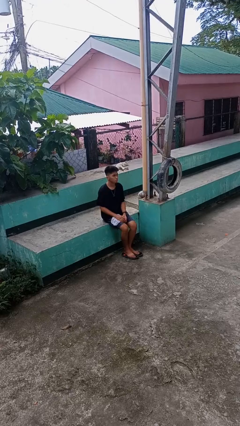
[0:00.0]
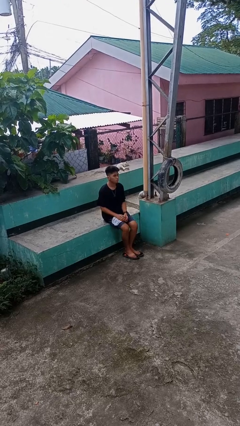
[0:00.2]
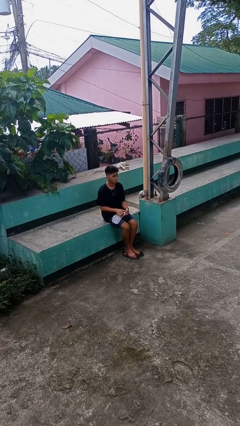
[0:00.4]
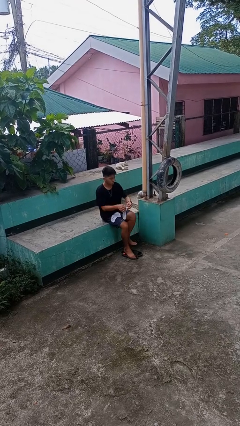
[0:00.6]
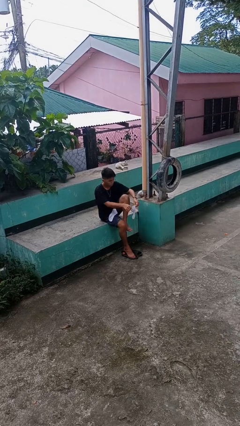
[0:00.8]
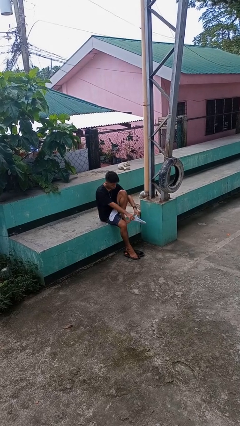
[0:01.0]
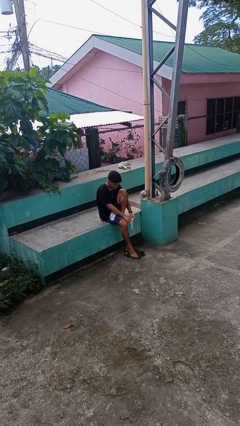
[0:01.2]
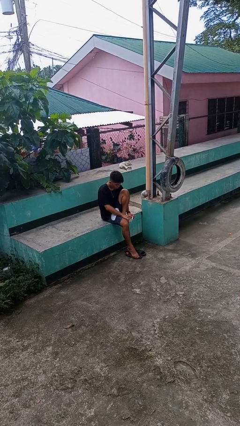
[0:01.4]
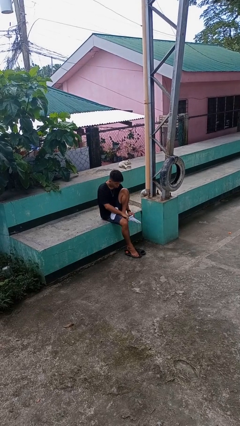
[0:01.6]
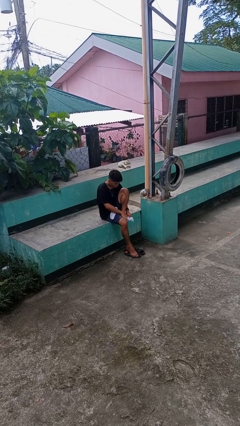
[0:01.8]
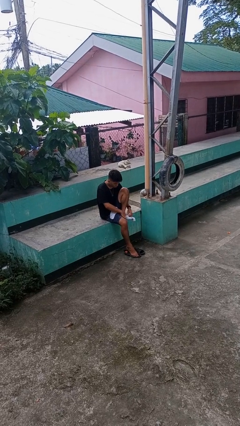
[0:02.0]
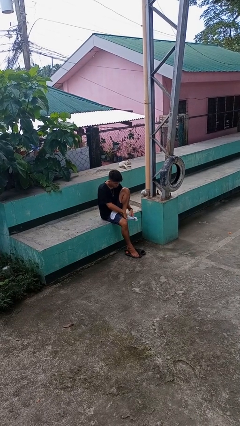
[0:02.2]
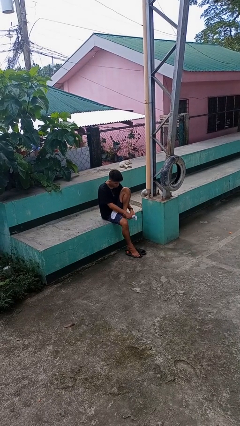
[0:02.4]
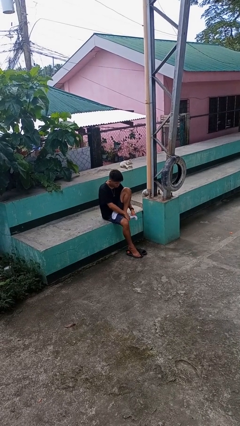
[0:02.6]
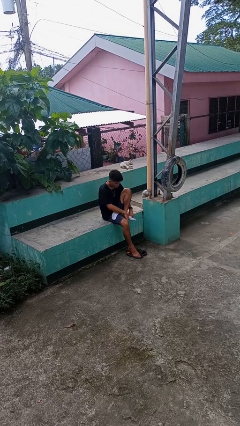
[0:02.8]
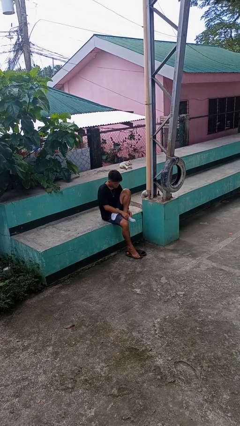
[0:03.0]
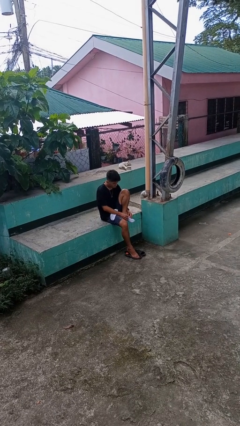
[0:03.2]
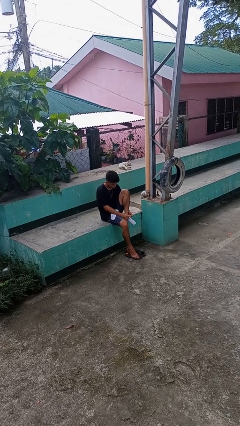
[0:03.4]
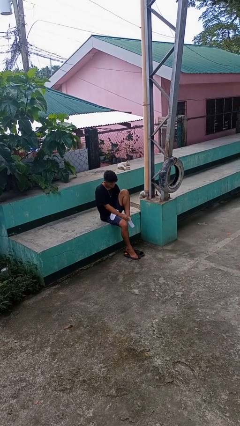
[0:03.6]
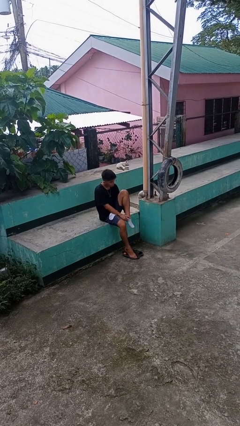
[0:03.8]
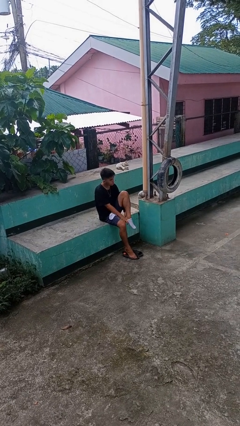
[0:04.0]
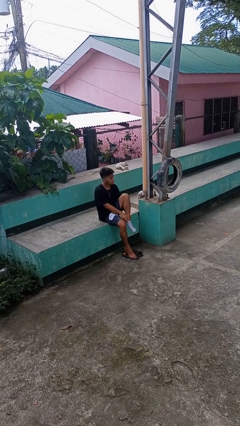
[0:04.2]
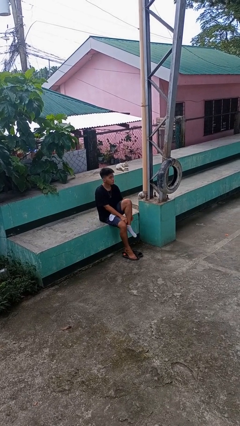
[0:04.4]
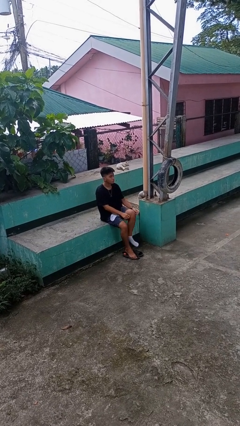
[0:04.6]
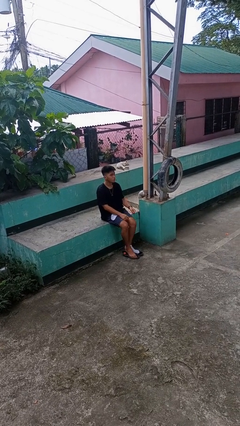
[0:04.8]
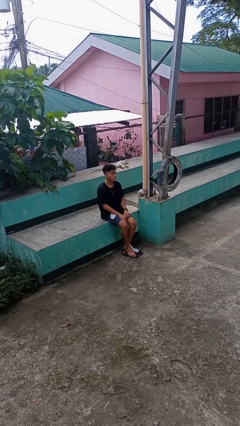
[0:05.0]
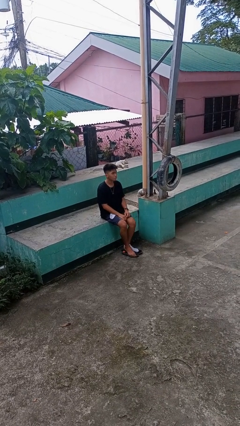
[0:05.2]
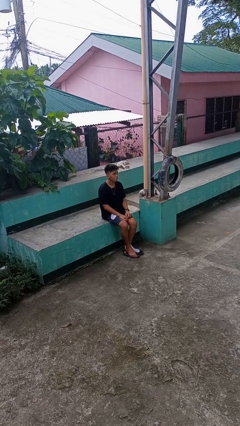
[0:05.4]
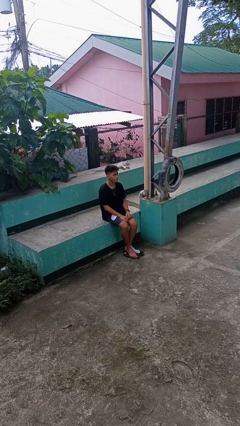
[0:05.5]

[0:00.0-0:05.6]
person puts on socks

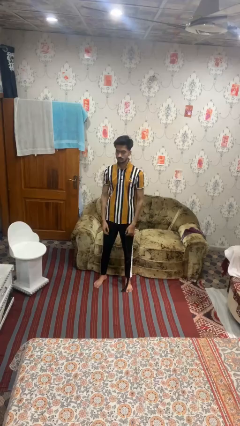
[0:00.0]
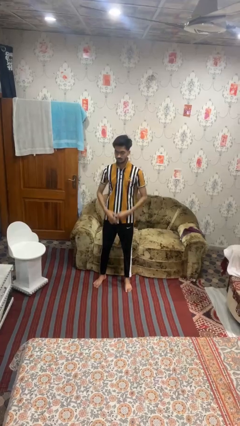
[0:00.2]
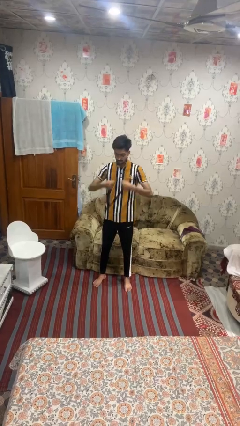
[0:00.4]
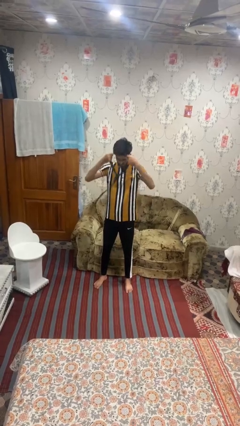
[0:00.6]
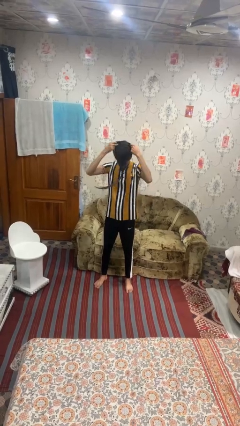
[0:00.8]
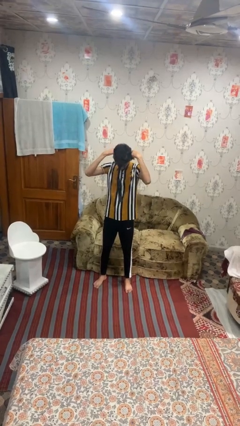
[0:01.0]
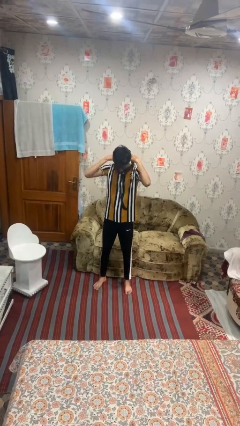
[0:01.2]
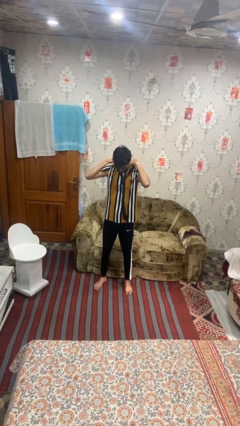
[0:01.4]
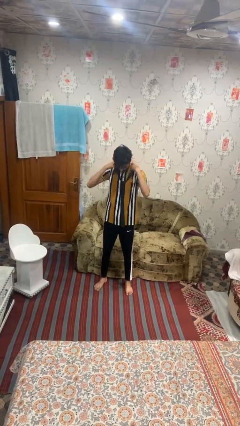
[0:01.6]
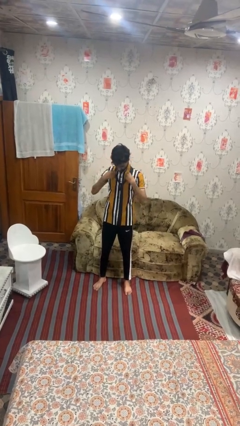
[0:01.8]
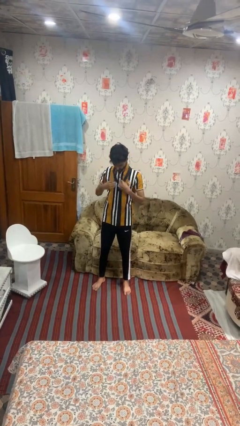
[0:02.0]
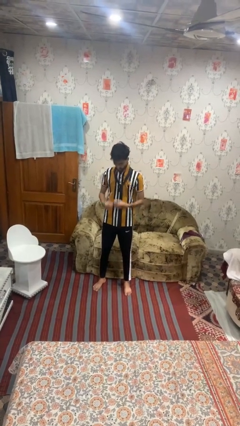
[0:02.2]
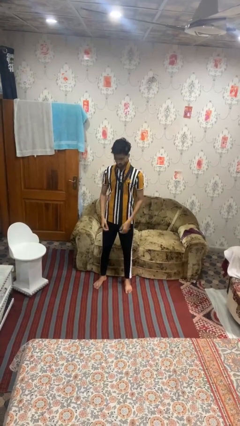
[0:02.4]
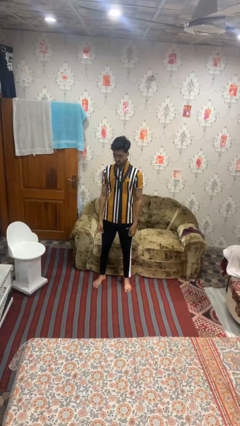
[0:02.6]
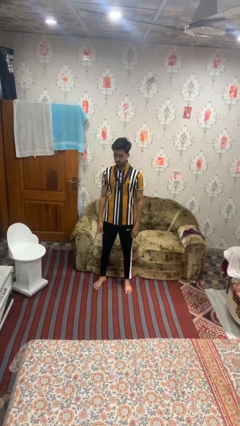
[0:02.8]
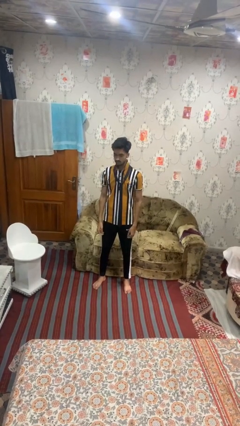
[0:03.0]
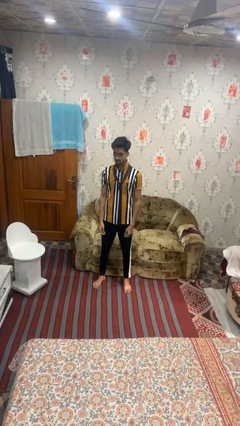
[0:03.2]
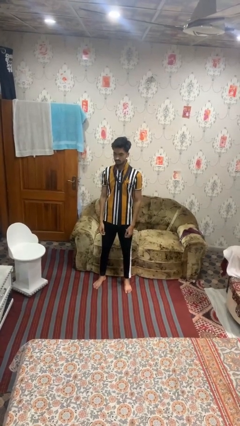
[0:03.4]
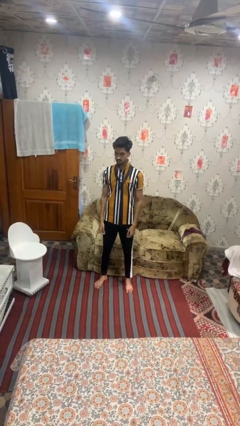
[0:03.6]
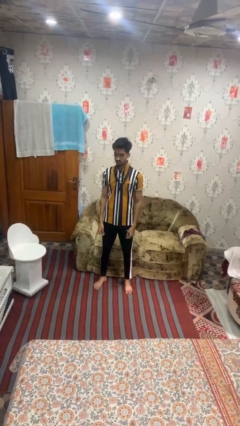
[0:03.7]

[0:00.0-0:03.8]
person puts on necktie

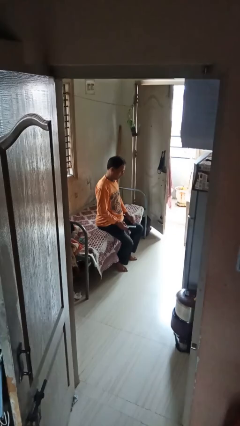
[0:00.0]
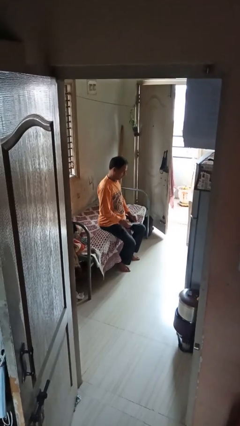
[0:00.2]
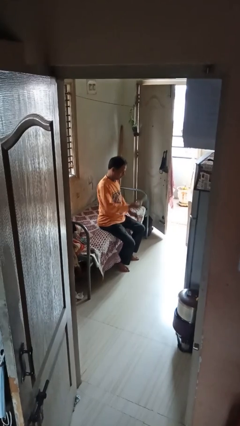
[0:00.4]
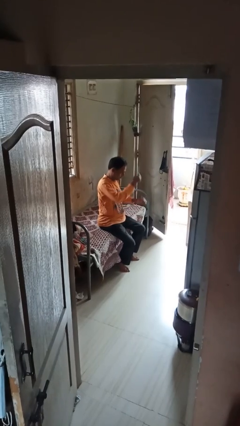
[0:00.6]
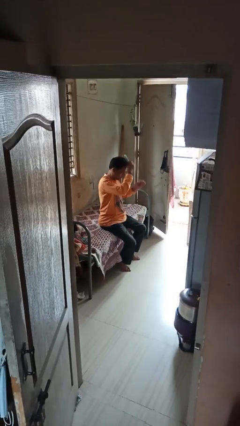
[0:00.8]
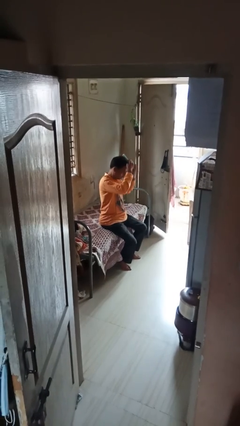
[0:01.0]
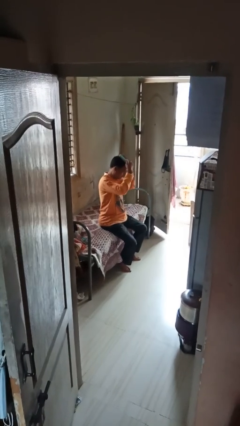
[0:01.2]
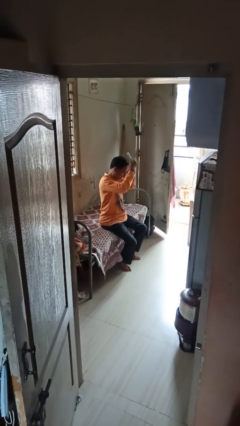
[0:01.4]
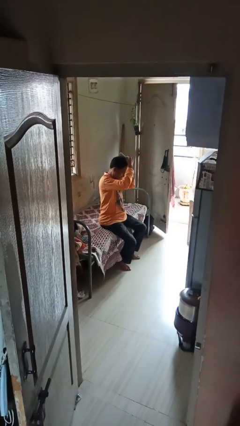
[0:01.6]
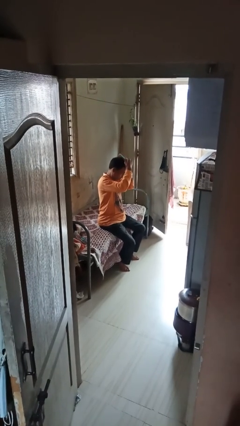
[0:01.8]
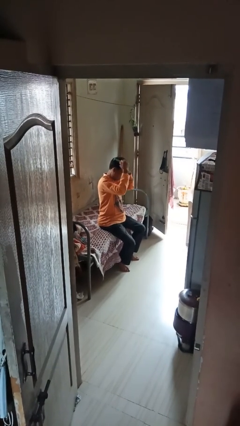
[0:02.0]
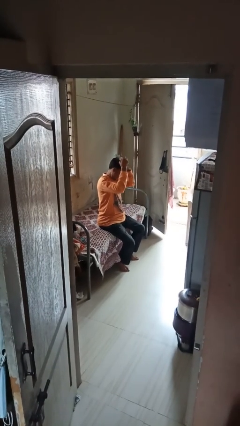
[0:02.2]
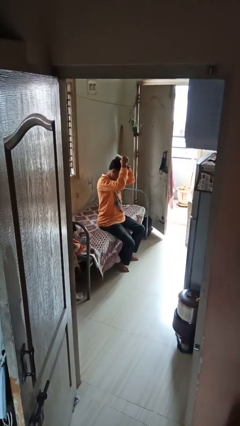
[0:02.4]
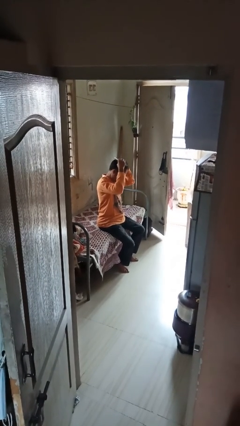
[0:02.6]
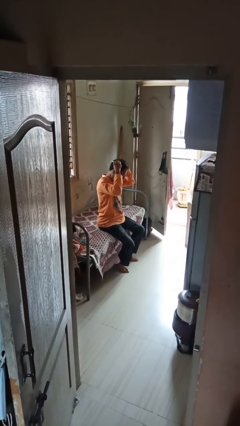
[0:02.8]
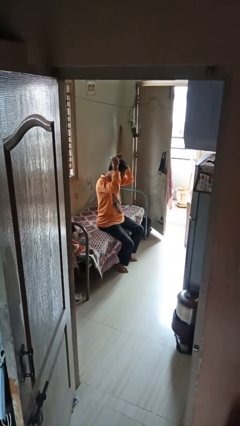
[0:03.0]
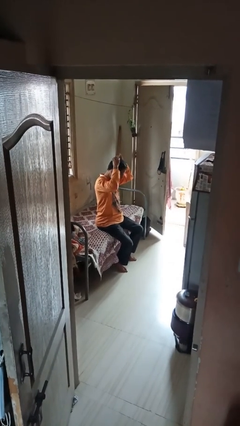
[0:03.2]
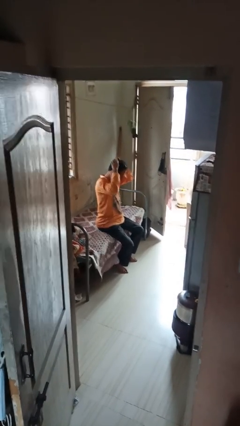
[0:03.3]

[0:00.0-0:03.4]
person brushes hair

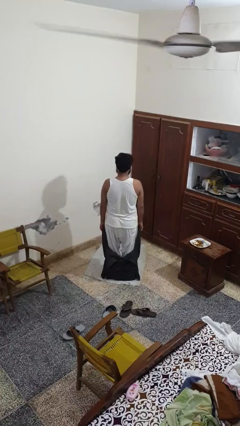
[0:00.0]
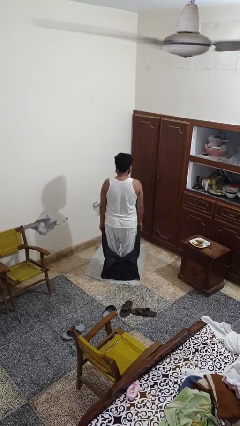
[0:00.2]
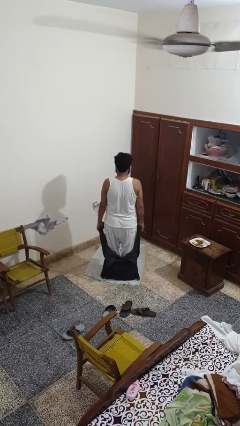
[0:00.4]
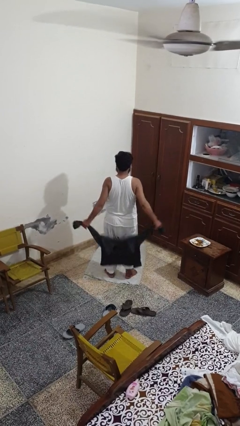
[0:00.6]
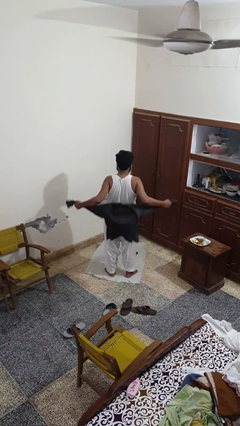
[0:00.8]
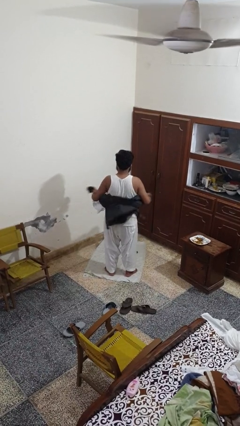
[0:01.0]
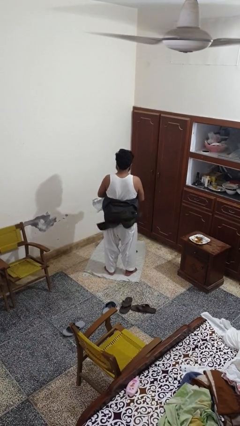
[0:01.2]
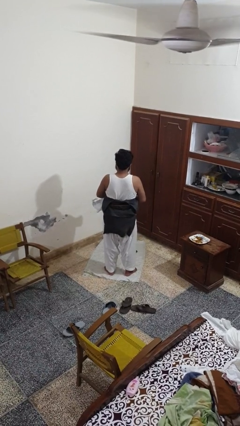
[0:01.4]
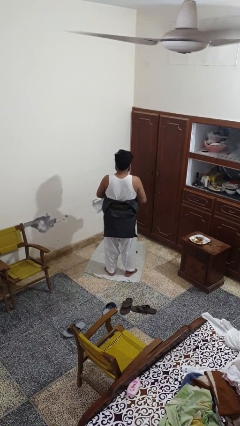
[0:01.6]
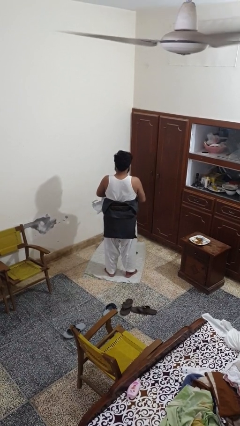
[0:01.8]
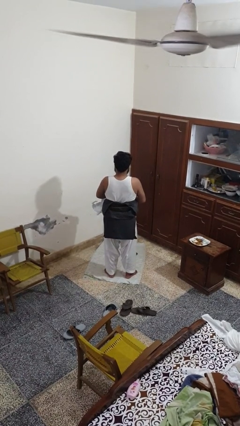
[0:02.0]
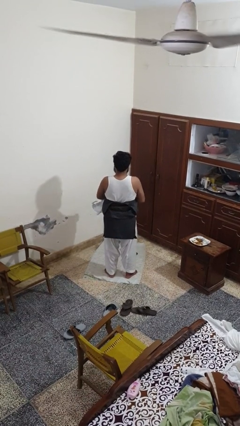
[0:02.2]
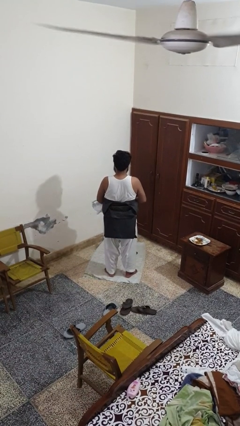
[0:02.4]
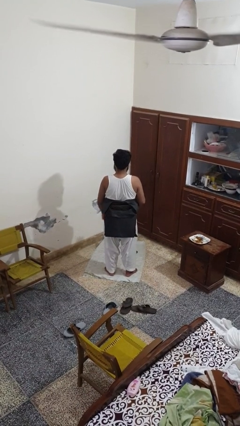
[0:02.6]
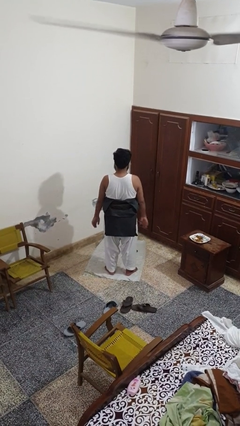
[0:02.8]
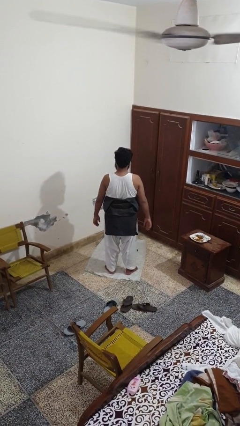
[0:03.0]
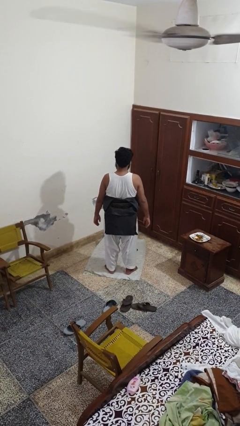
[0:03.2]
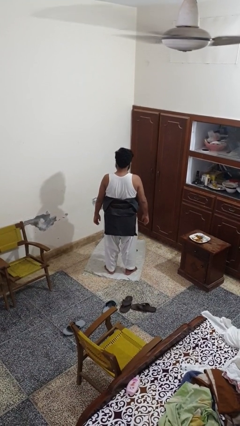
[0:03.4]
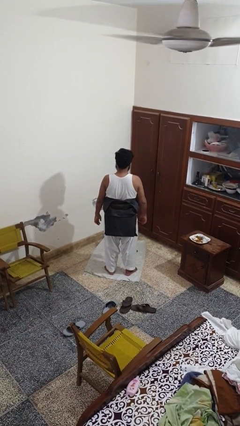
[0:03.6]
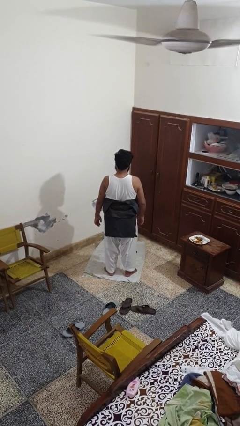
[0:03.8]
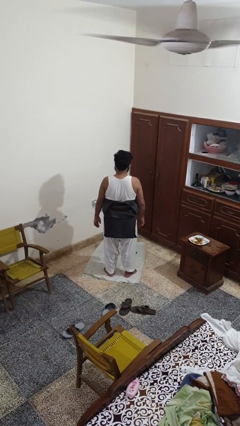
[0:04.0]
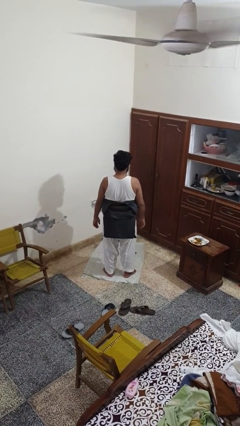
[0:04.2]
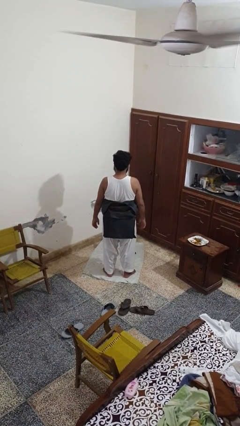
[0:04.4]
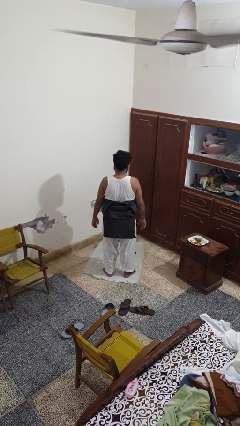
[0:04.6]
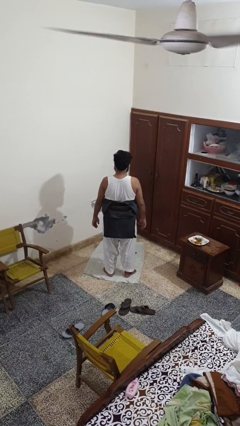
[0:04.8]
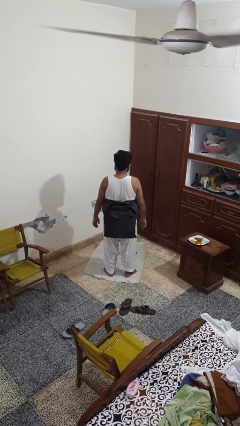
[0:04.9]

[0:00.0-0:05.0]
person ties jacket around waist
